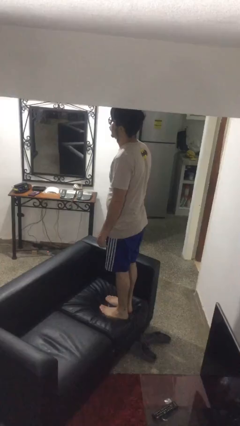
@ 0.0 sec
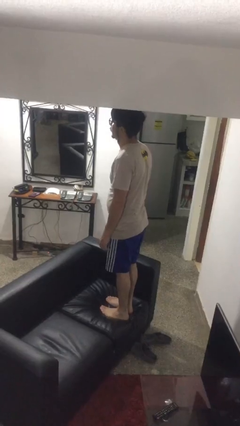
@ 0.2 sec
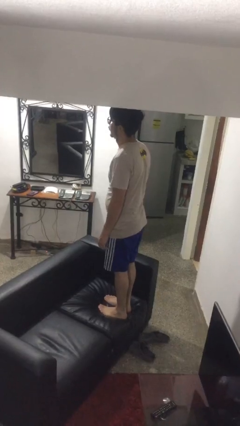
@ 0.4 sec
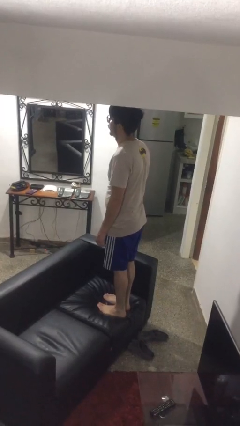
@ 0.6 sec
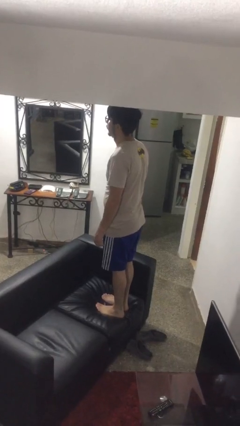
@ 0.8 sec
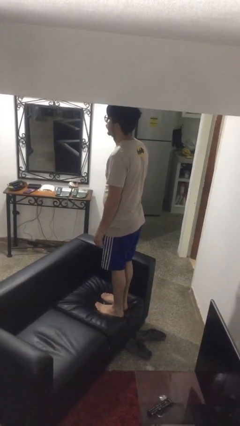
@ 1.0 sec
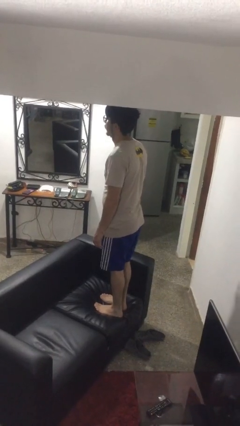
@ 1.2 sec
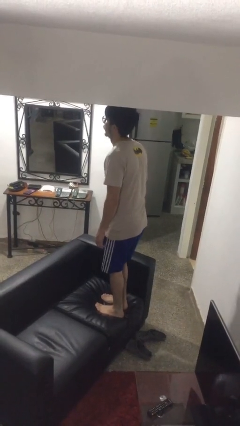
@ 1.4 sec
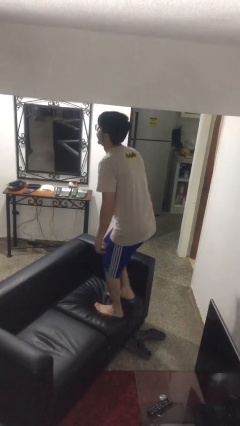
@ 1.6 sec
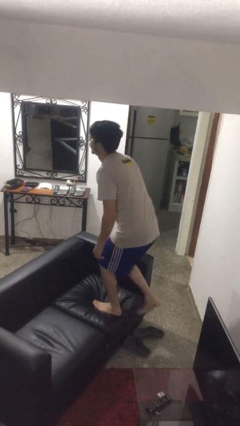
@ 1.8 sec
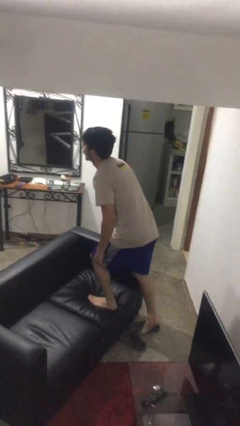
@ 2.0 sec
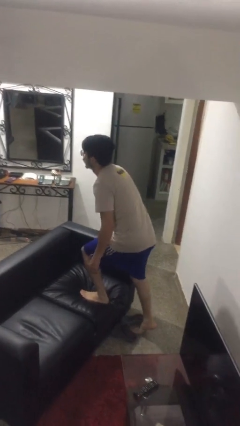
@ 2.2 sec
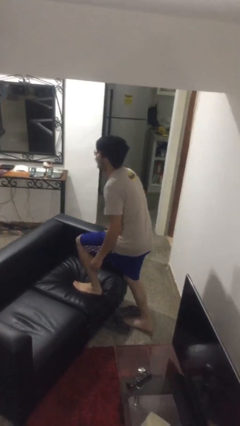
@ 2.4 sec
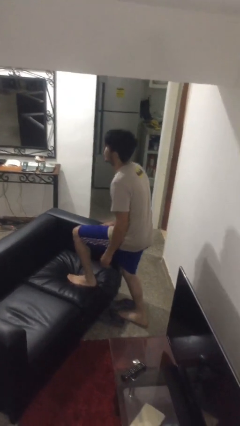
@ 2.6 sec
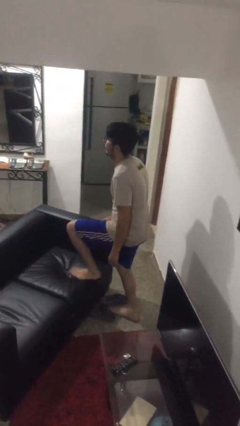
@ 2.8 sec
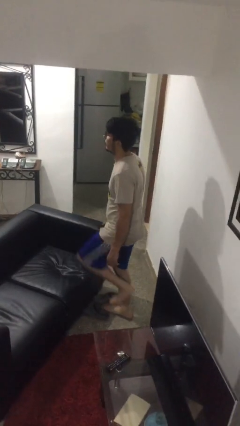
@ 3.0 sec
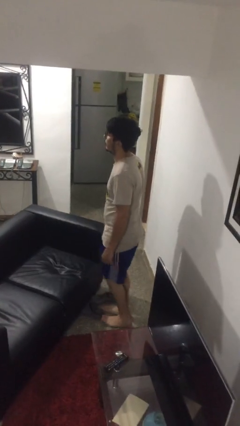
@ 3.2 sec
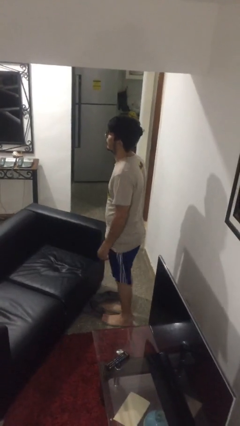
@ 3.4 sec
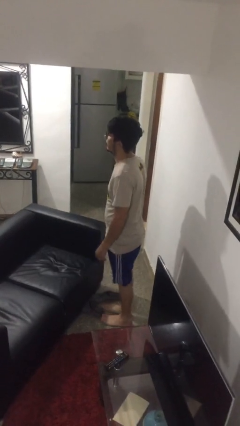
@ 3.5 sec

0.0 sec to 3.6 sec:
person climbs off couch

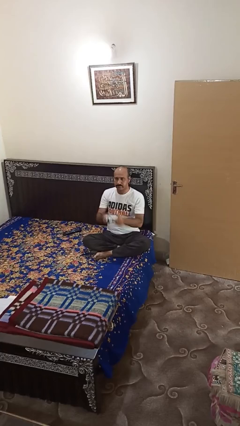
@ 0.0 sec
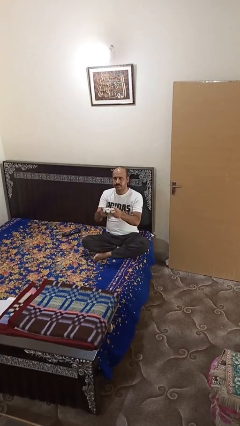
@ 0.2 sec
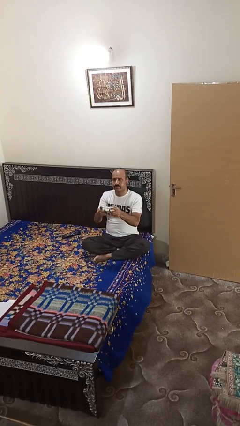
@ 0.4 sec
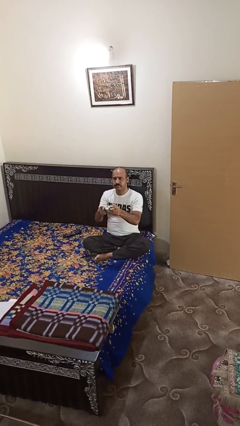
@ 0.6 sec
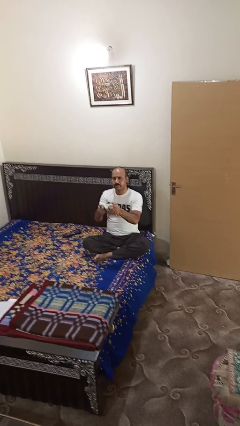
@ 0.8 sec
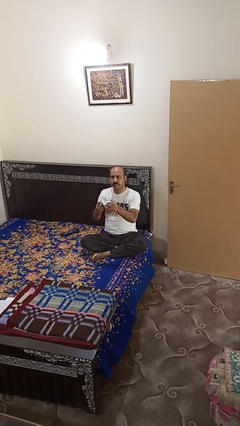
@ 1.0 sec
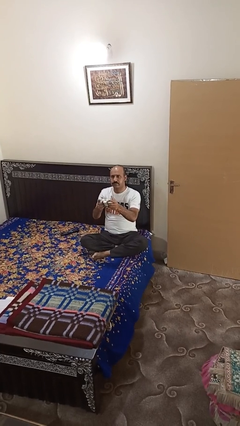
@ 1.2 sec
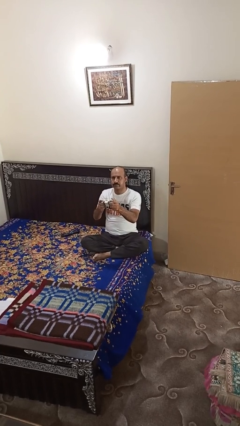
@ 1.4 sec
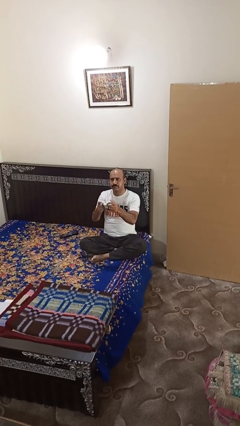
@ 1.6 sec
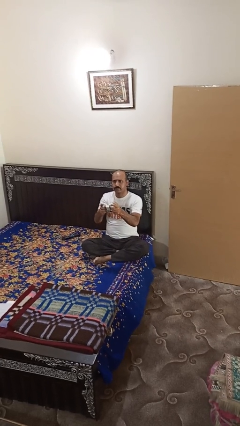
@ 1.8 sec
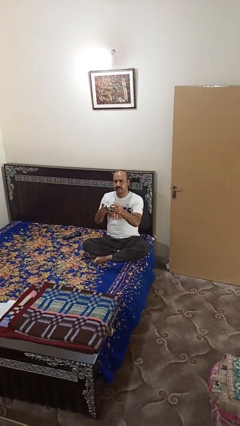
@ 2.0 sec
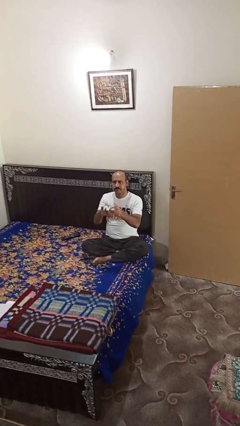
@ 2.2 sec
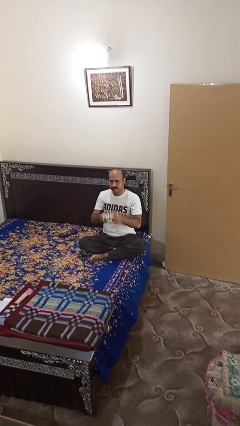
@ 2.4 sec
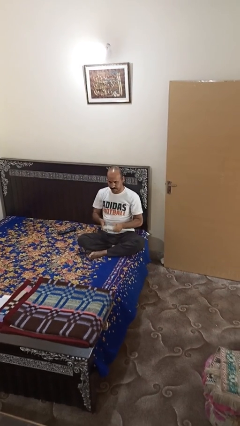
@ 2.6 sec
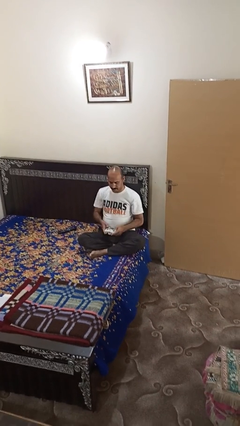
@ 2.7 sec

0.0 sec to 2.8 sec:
person interacts with handheld game

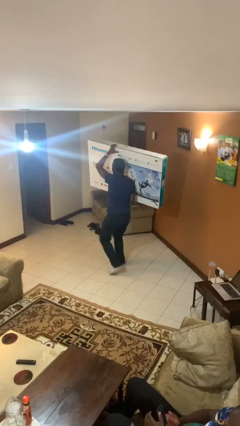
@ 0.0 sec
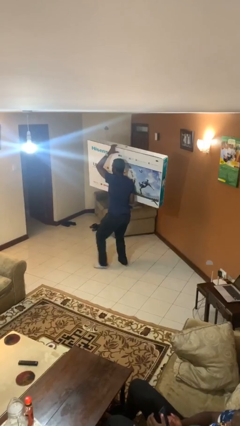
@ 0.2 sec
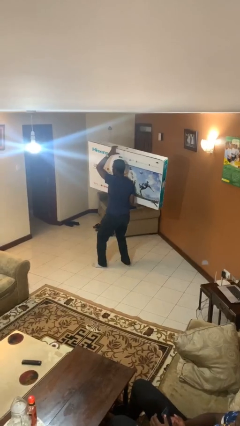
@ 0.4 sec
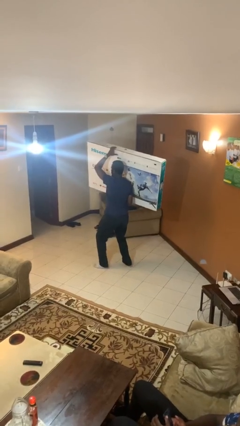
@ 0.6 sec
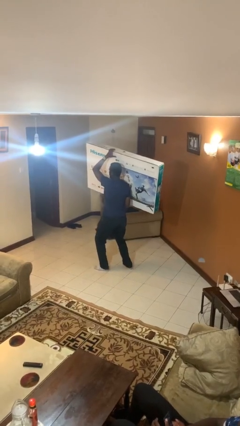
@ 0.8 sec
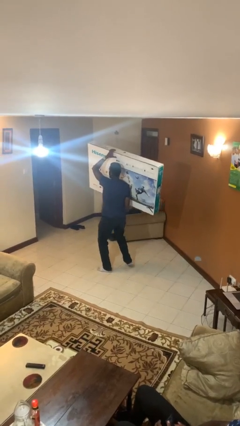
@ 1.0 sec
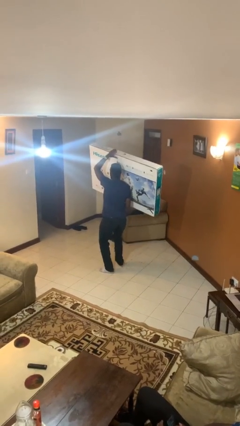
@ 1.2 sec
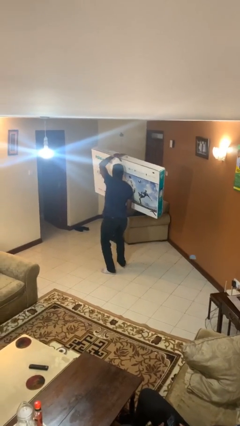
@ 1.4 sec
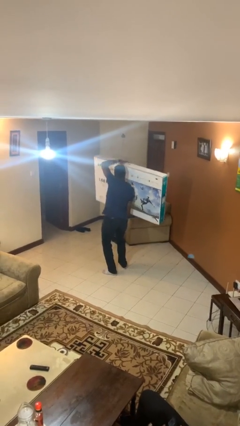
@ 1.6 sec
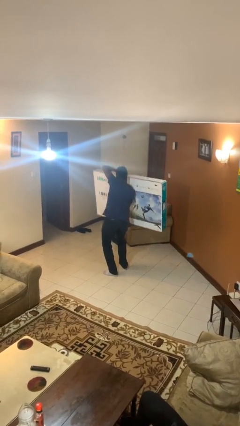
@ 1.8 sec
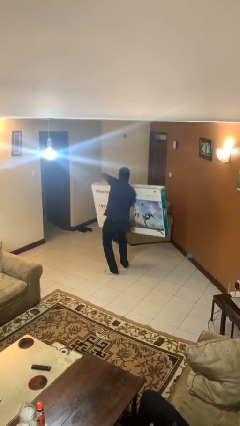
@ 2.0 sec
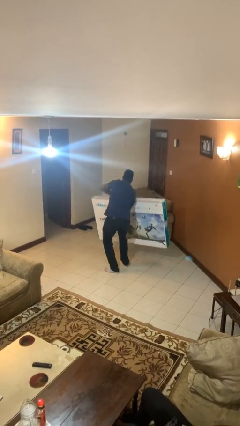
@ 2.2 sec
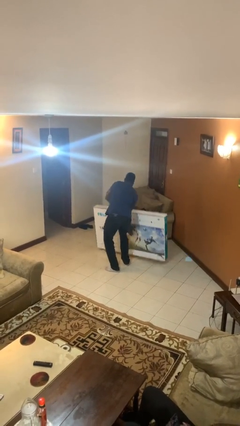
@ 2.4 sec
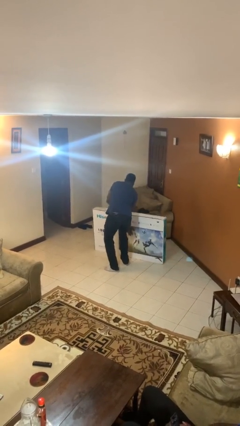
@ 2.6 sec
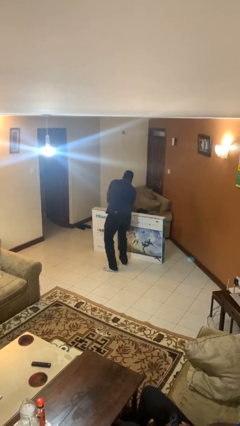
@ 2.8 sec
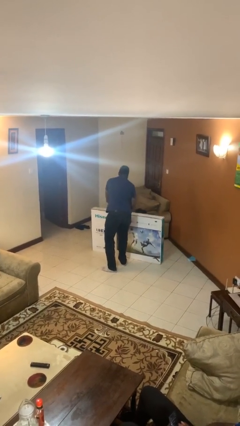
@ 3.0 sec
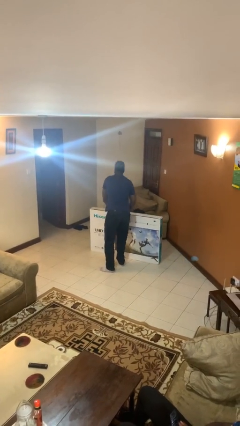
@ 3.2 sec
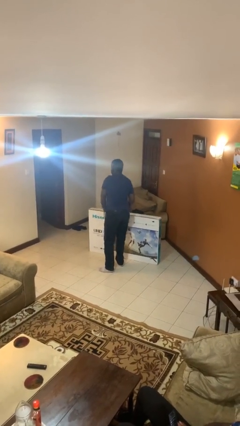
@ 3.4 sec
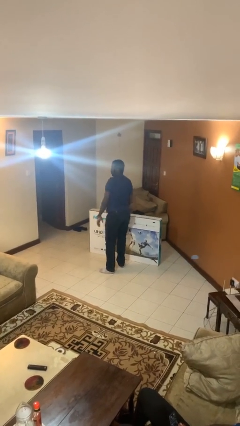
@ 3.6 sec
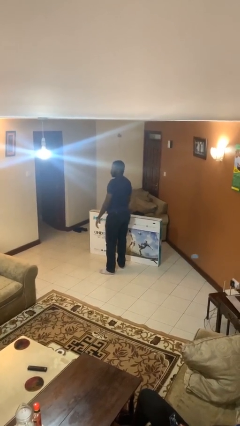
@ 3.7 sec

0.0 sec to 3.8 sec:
person puts down object on floor

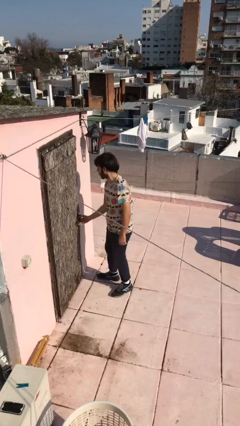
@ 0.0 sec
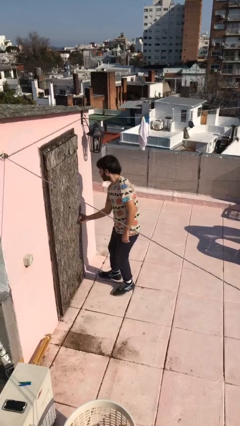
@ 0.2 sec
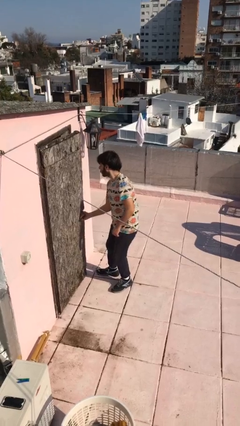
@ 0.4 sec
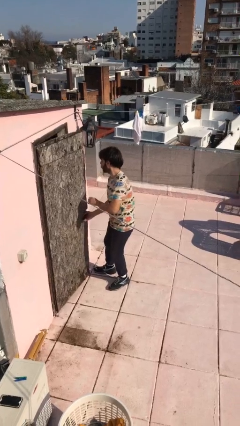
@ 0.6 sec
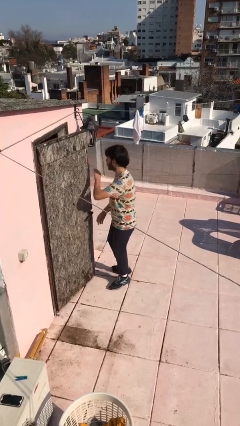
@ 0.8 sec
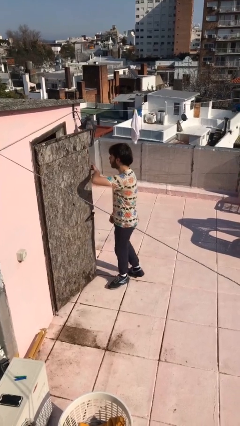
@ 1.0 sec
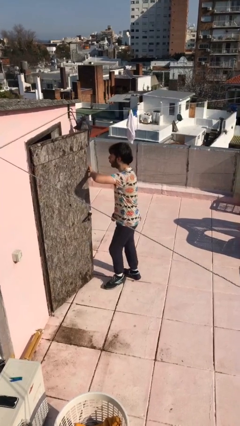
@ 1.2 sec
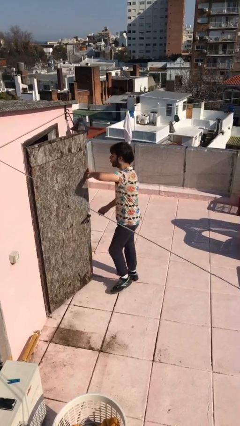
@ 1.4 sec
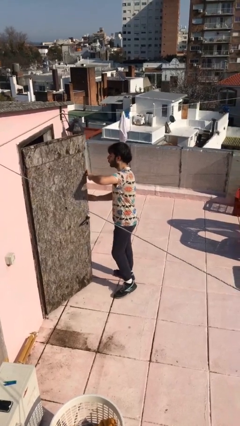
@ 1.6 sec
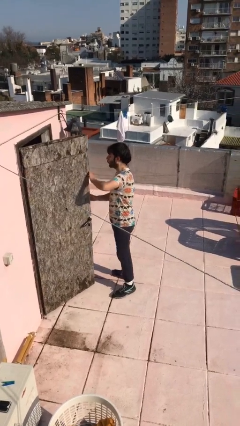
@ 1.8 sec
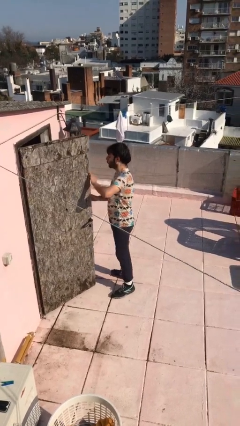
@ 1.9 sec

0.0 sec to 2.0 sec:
person opens facility door

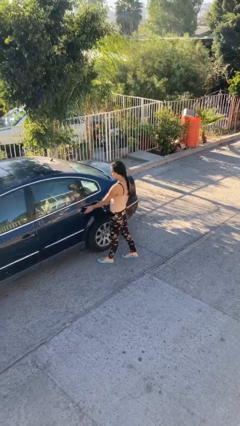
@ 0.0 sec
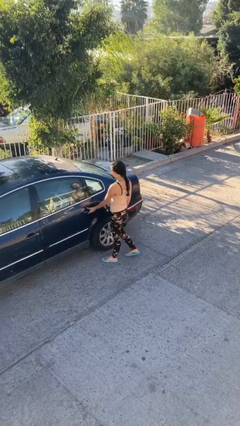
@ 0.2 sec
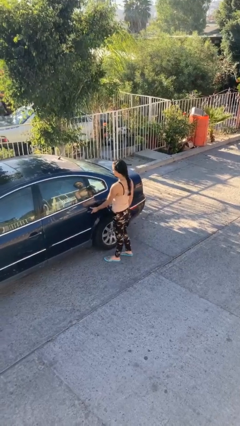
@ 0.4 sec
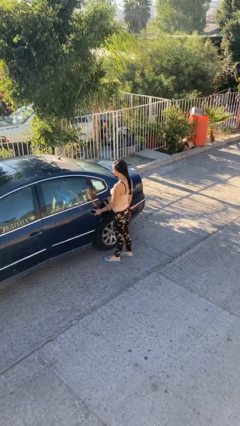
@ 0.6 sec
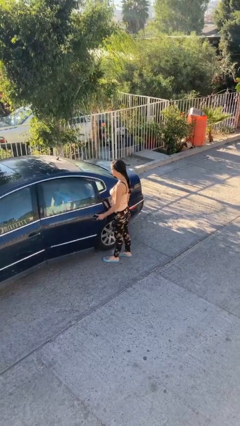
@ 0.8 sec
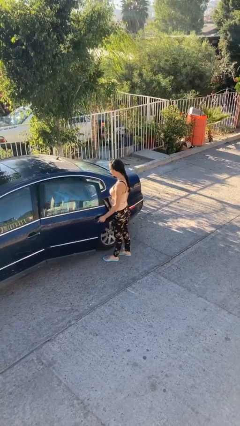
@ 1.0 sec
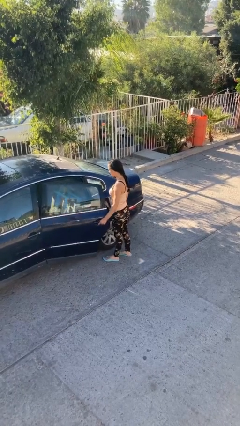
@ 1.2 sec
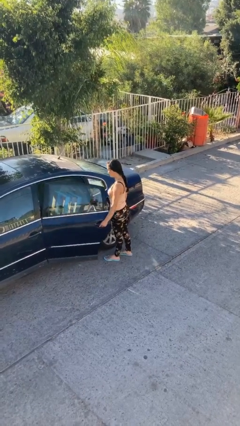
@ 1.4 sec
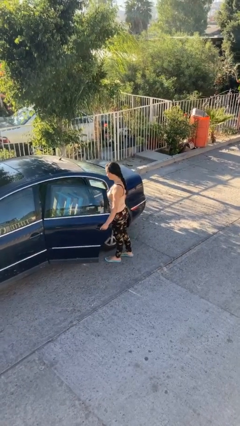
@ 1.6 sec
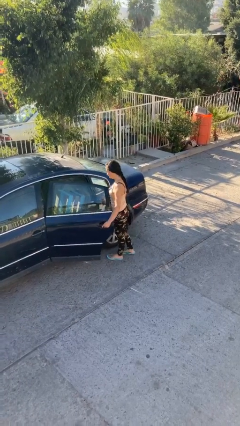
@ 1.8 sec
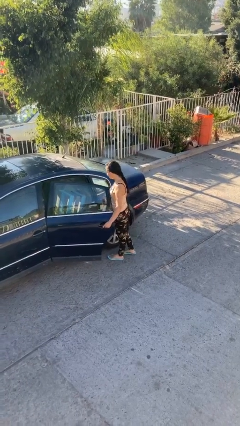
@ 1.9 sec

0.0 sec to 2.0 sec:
person opens car door

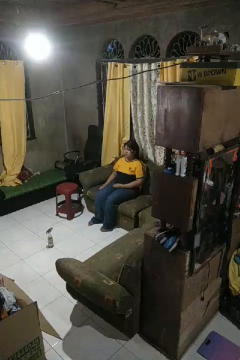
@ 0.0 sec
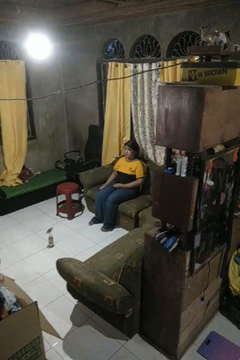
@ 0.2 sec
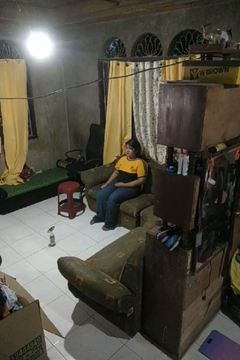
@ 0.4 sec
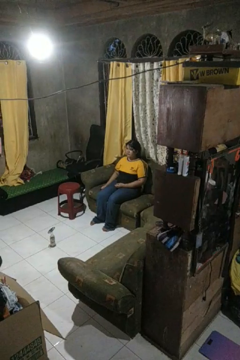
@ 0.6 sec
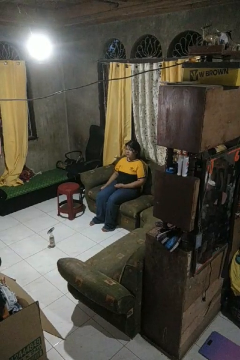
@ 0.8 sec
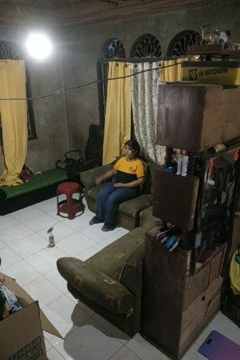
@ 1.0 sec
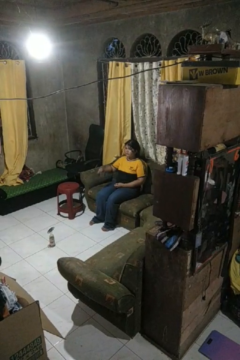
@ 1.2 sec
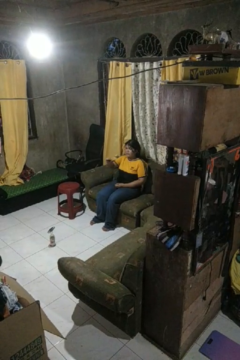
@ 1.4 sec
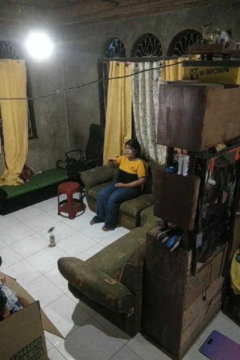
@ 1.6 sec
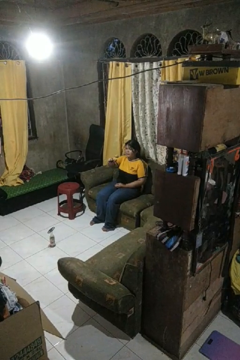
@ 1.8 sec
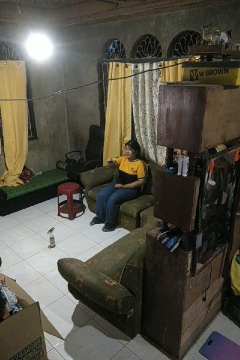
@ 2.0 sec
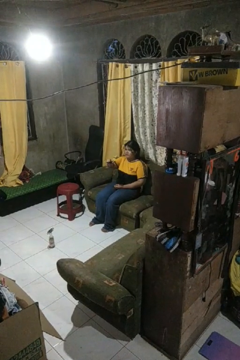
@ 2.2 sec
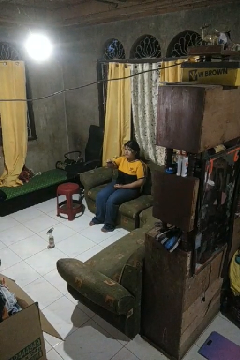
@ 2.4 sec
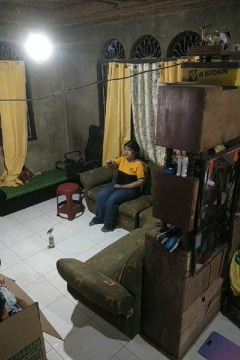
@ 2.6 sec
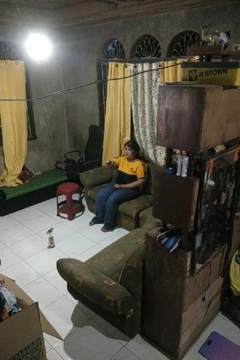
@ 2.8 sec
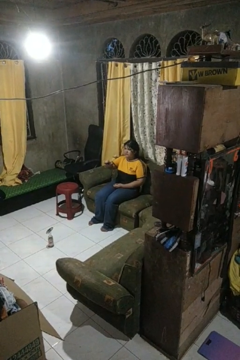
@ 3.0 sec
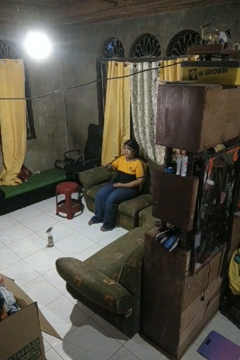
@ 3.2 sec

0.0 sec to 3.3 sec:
person uses television remote
